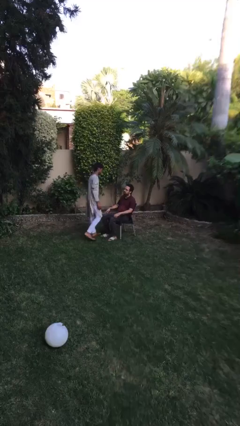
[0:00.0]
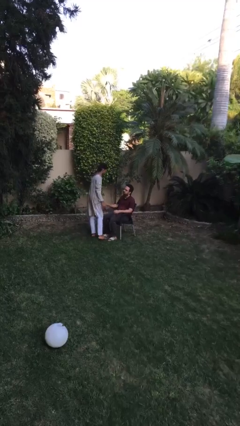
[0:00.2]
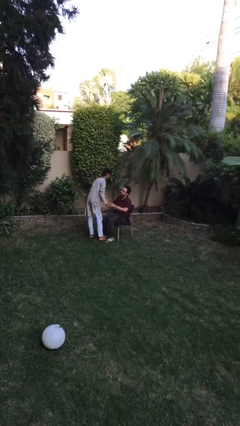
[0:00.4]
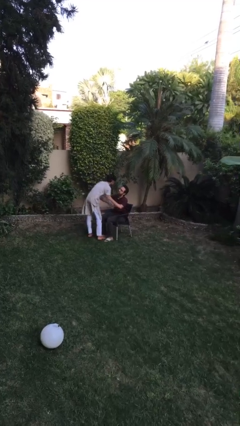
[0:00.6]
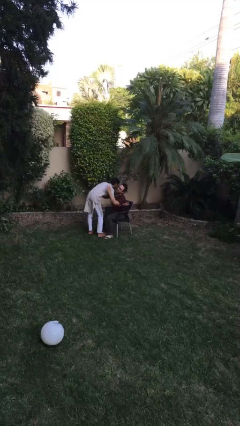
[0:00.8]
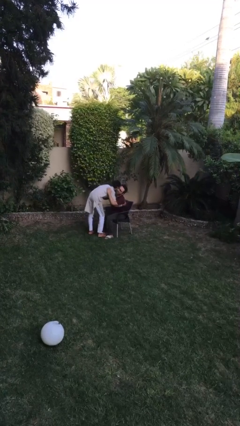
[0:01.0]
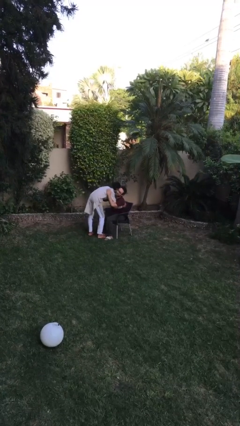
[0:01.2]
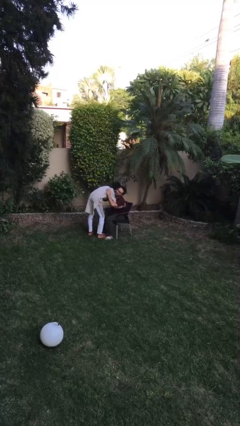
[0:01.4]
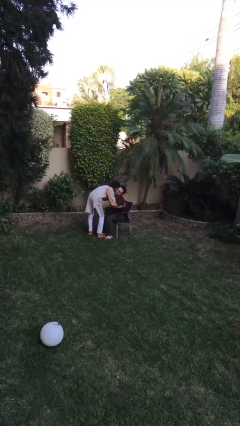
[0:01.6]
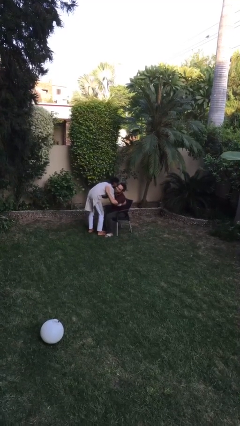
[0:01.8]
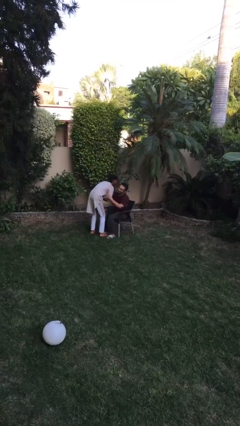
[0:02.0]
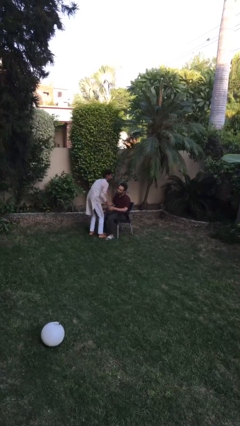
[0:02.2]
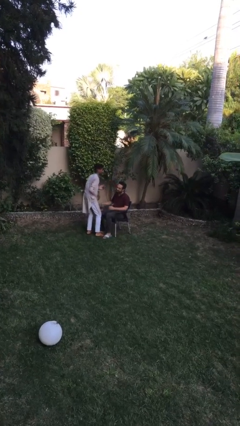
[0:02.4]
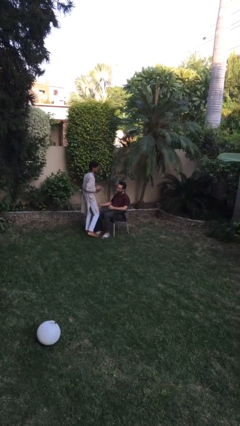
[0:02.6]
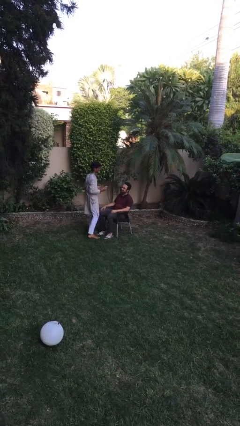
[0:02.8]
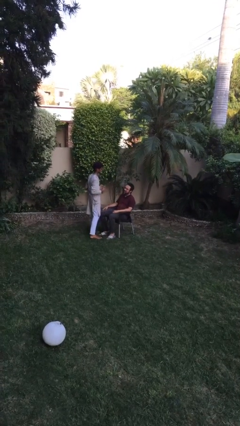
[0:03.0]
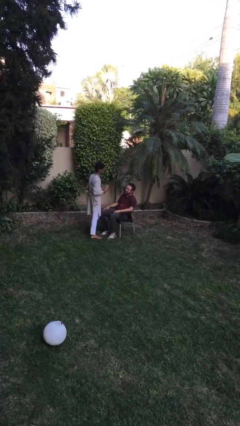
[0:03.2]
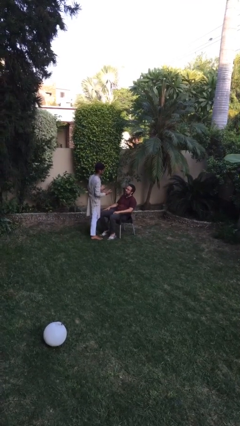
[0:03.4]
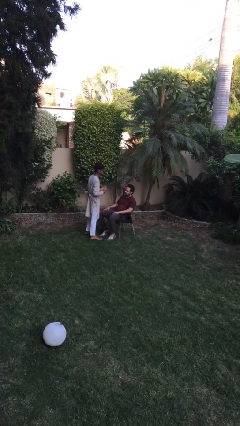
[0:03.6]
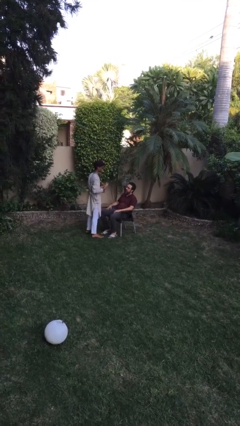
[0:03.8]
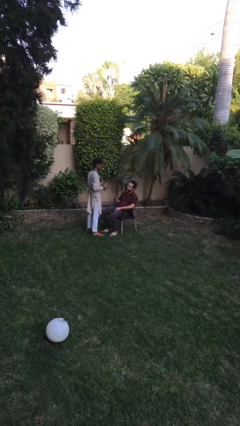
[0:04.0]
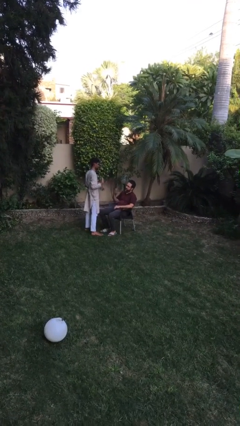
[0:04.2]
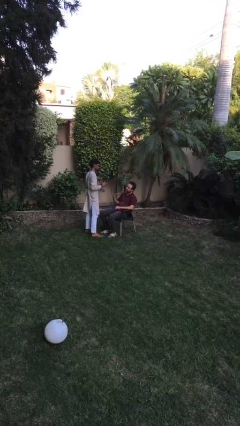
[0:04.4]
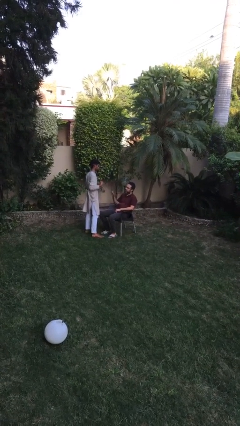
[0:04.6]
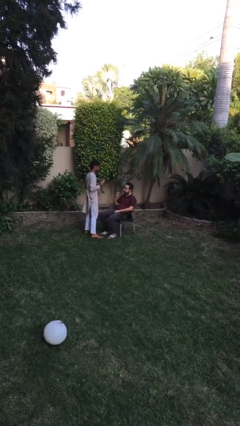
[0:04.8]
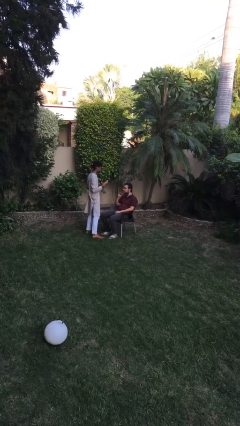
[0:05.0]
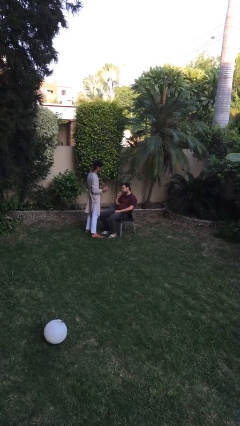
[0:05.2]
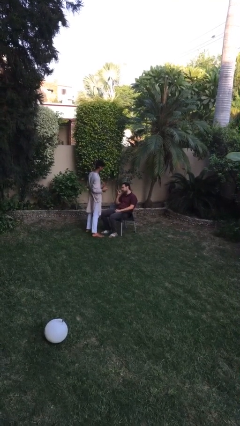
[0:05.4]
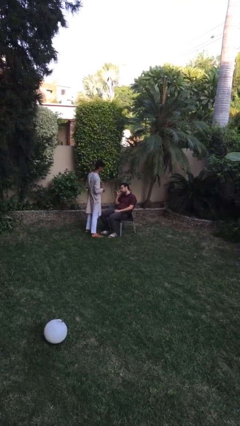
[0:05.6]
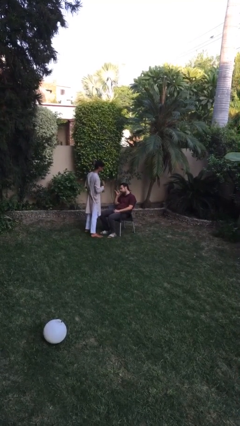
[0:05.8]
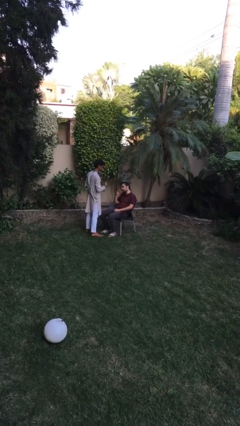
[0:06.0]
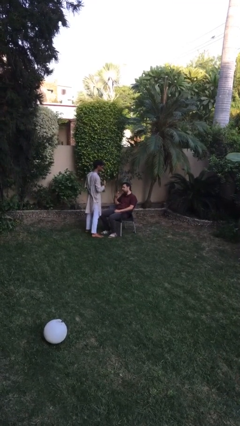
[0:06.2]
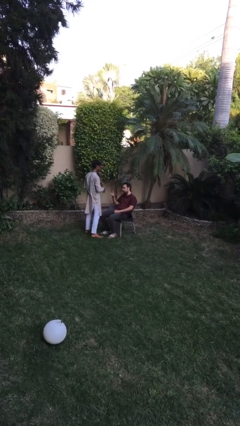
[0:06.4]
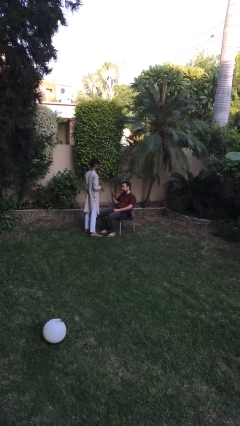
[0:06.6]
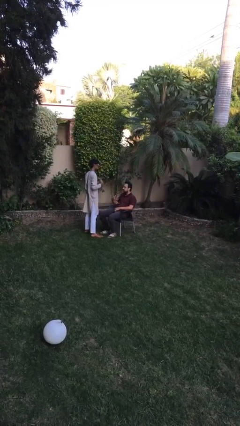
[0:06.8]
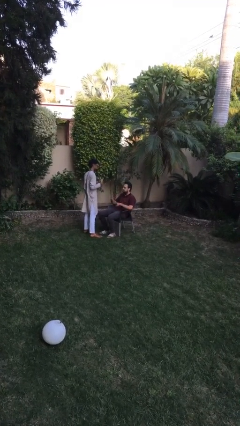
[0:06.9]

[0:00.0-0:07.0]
person embraces person

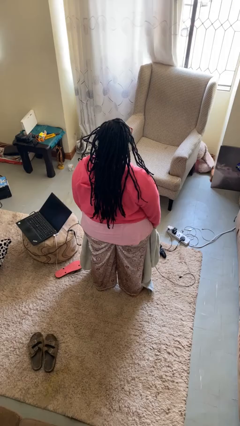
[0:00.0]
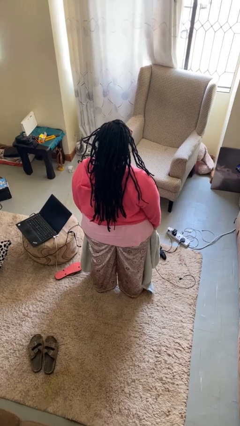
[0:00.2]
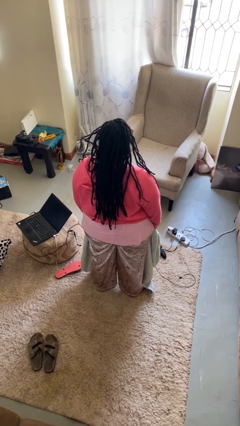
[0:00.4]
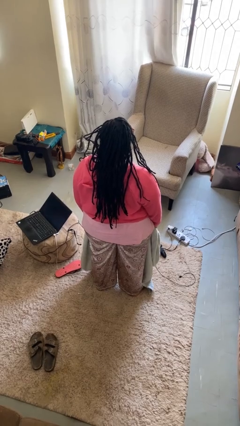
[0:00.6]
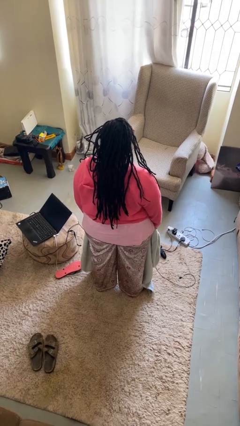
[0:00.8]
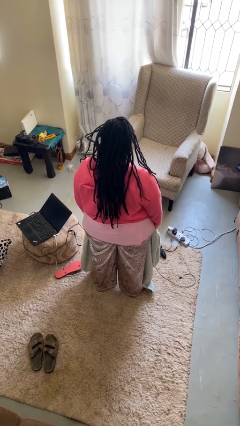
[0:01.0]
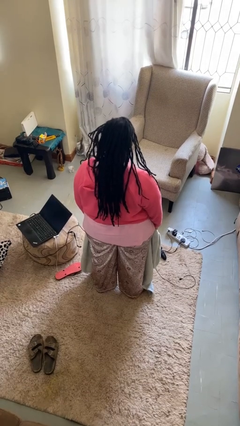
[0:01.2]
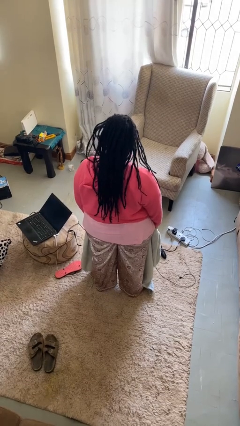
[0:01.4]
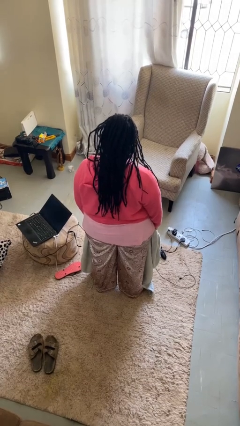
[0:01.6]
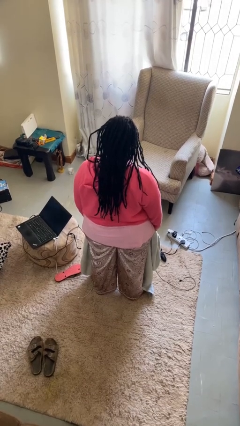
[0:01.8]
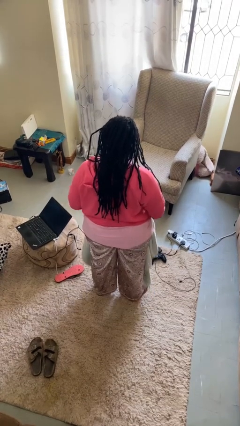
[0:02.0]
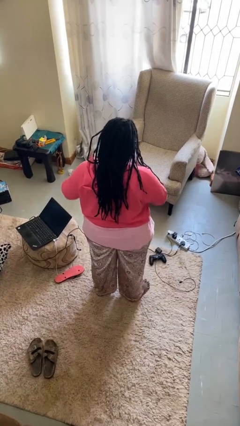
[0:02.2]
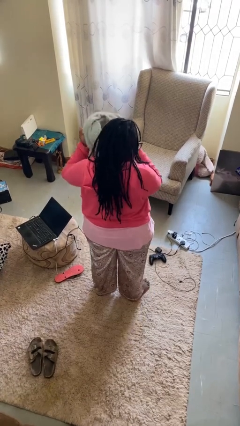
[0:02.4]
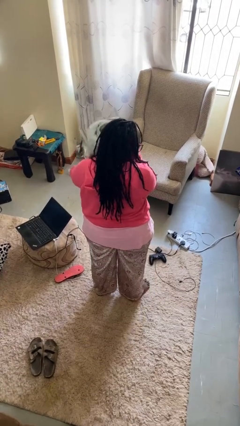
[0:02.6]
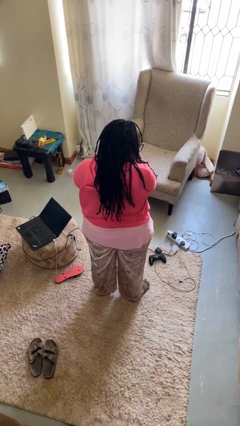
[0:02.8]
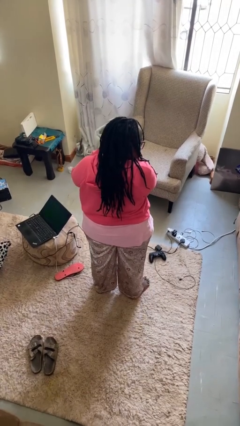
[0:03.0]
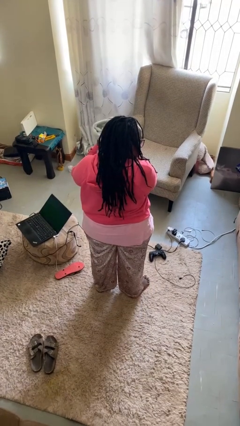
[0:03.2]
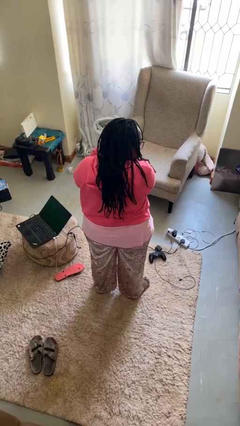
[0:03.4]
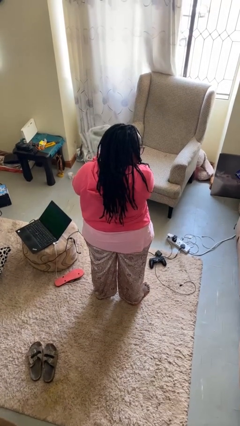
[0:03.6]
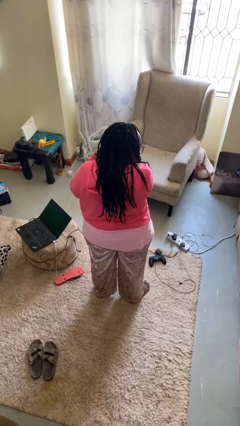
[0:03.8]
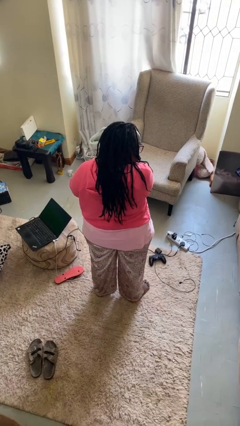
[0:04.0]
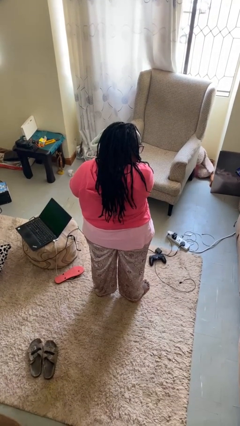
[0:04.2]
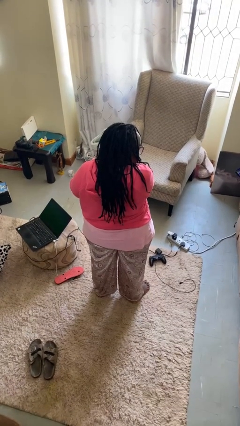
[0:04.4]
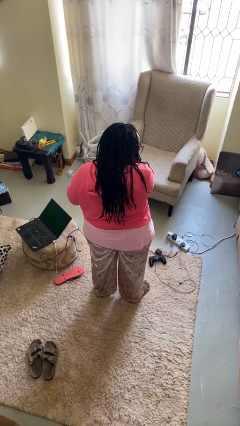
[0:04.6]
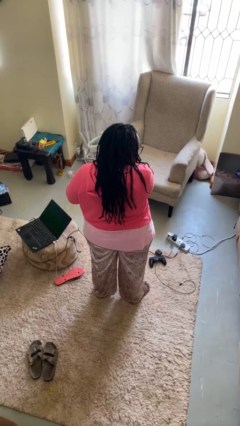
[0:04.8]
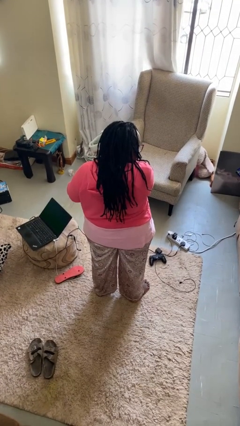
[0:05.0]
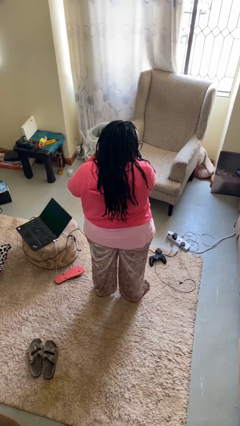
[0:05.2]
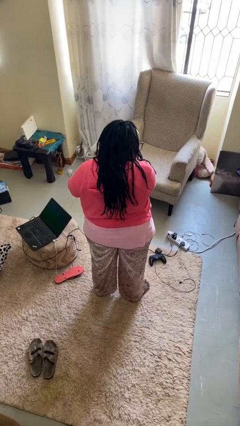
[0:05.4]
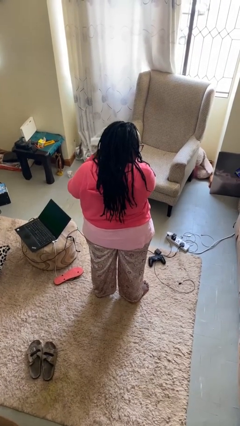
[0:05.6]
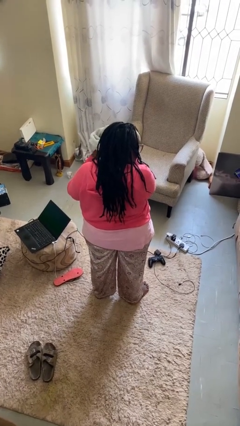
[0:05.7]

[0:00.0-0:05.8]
person dries hair with towel

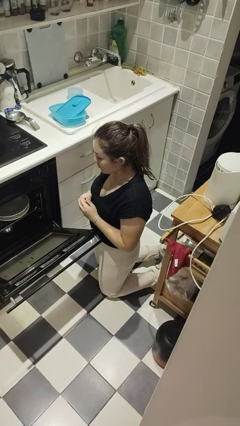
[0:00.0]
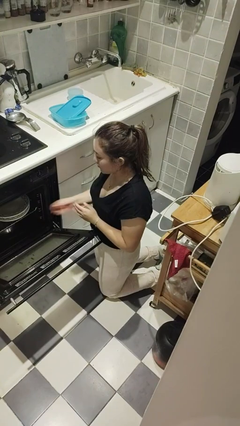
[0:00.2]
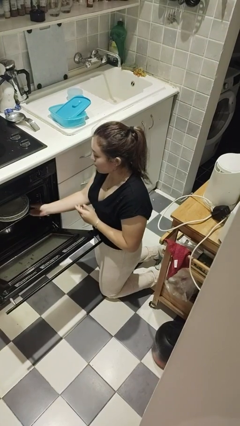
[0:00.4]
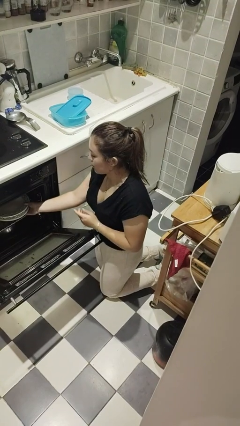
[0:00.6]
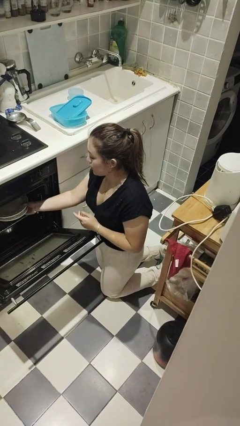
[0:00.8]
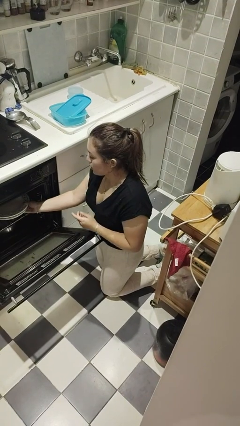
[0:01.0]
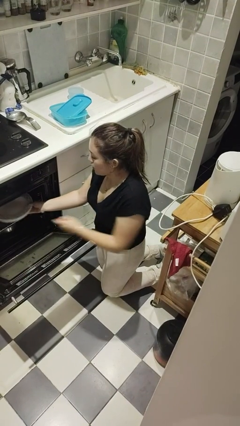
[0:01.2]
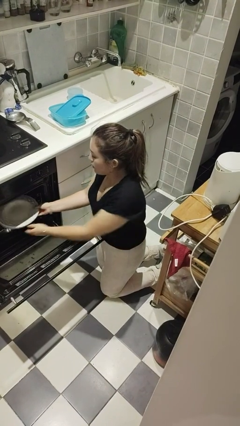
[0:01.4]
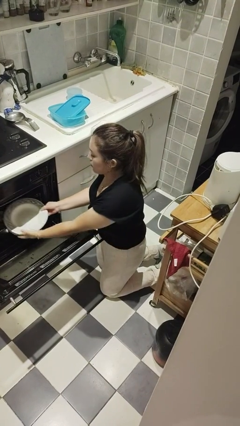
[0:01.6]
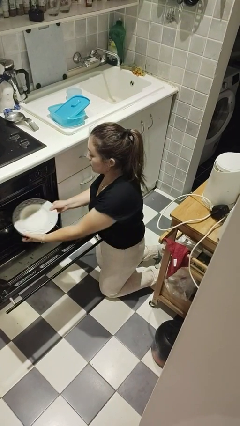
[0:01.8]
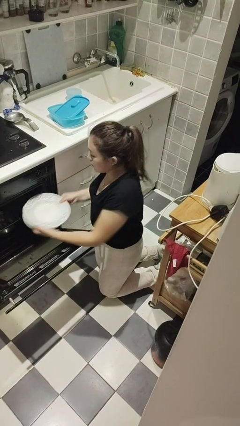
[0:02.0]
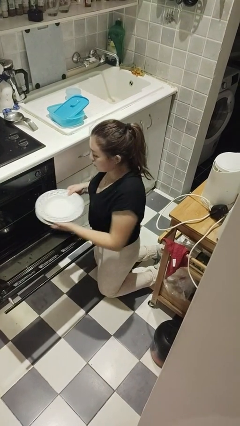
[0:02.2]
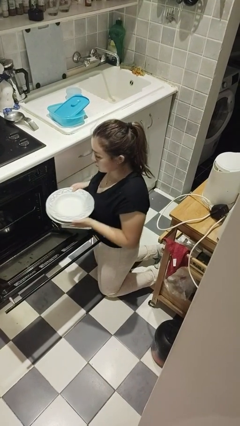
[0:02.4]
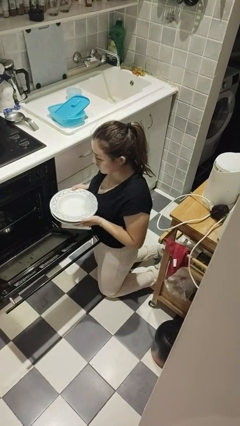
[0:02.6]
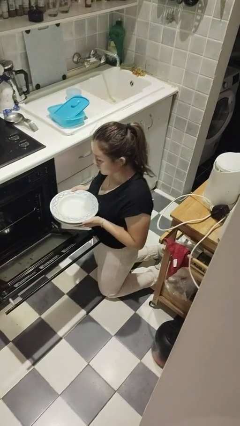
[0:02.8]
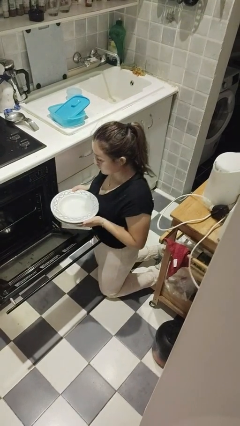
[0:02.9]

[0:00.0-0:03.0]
person unloads dishwasher

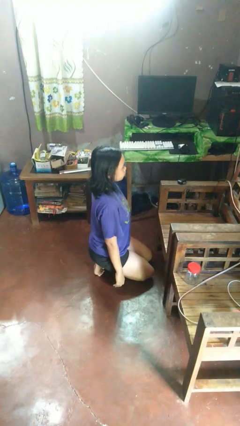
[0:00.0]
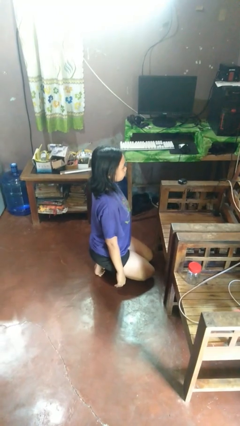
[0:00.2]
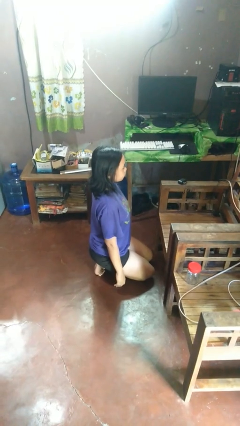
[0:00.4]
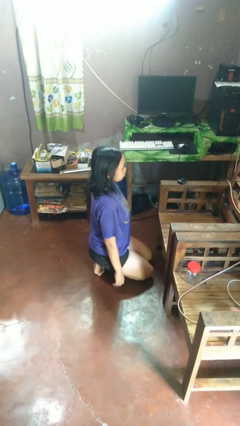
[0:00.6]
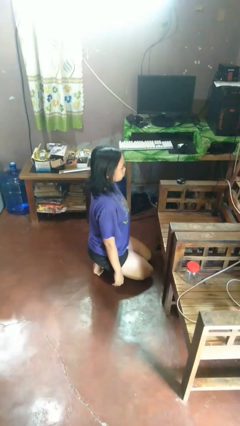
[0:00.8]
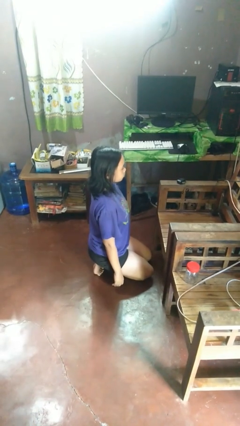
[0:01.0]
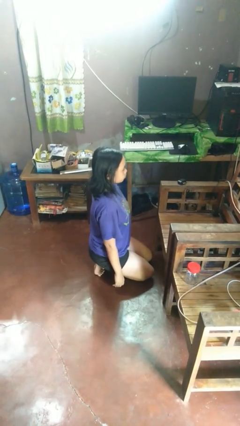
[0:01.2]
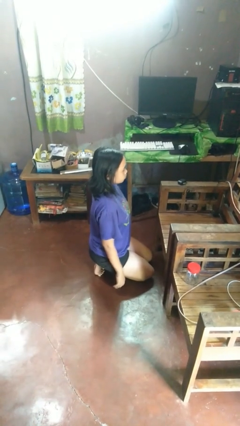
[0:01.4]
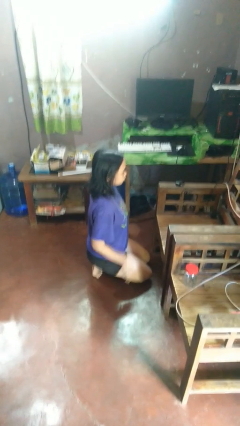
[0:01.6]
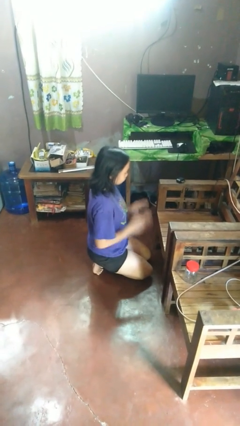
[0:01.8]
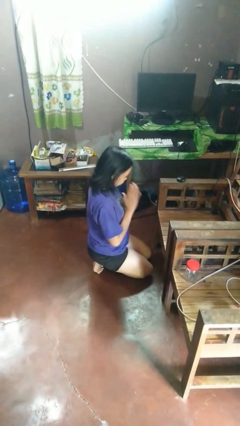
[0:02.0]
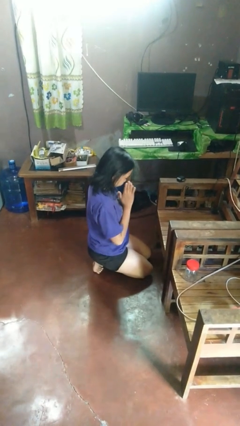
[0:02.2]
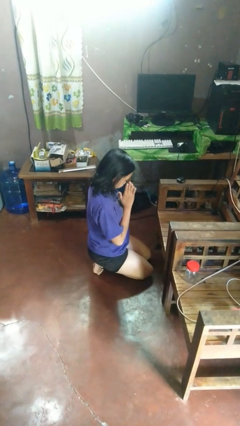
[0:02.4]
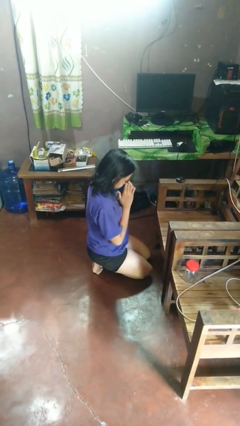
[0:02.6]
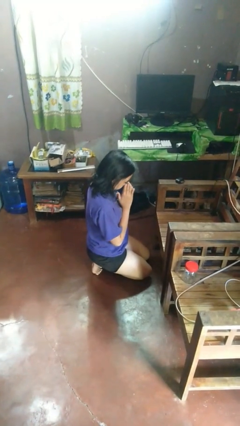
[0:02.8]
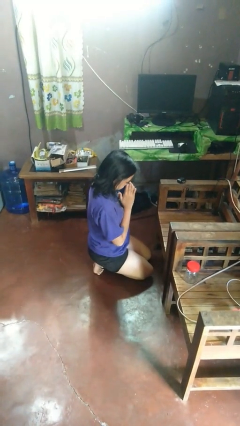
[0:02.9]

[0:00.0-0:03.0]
person prays
